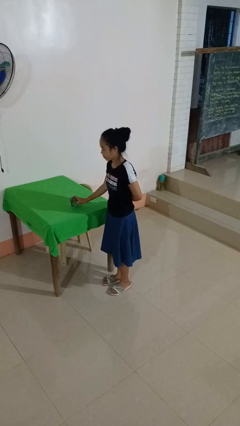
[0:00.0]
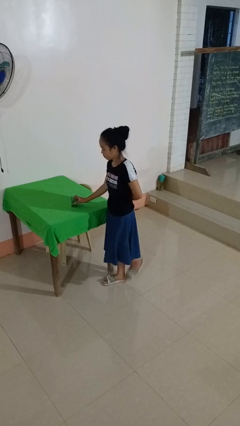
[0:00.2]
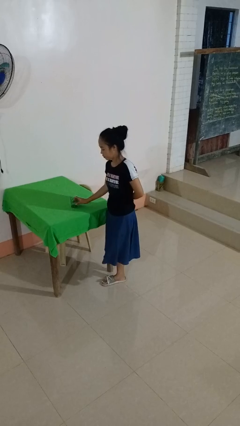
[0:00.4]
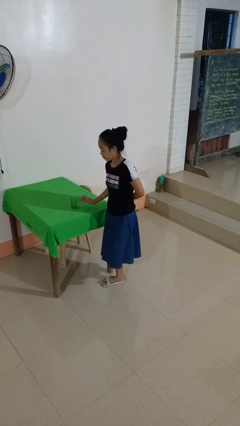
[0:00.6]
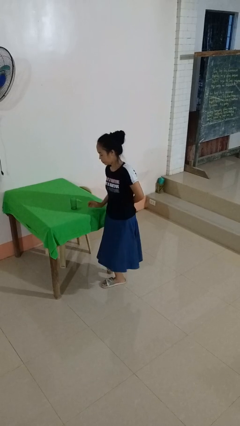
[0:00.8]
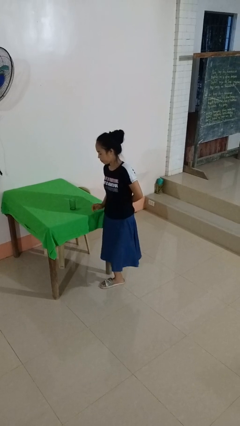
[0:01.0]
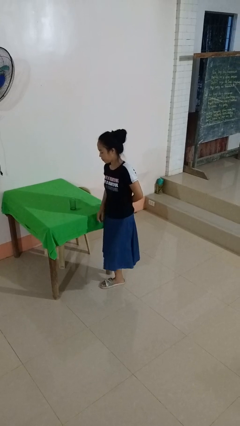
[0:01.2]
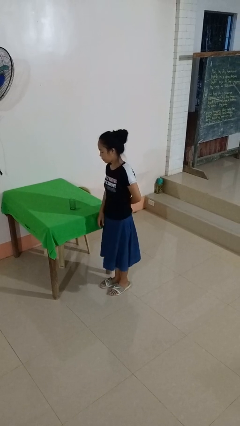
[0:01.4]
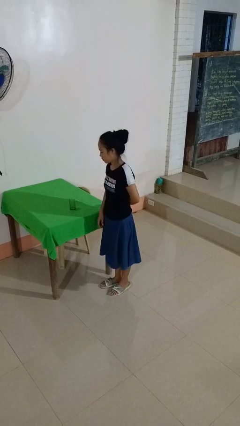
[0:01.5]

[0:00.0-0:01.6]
person sets upright glass

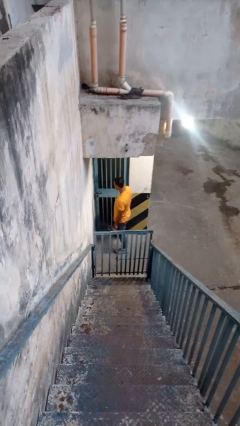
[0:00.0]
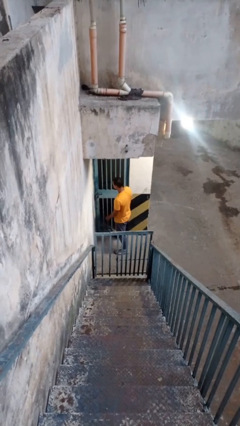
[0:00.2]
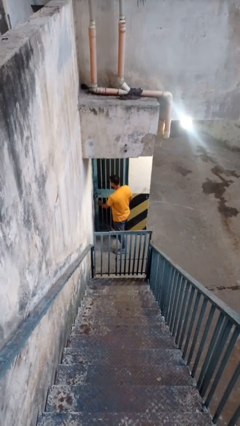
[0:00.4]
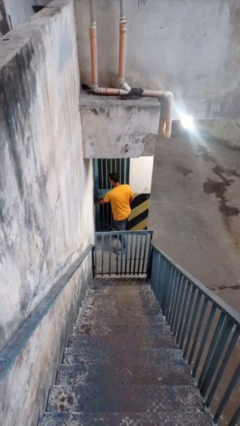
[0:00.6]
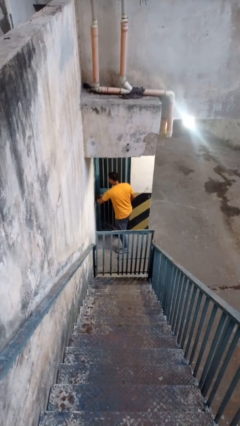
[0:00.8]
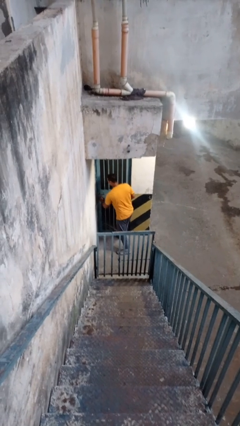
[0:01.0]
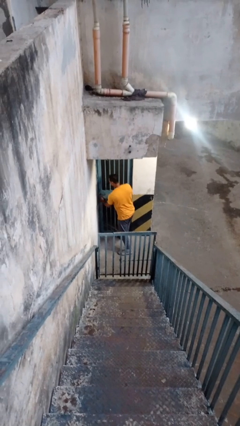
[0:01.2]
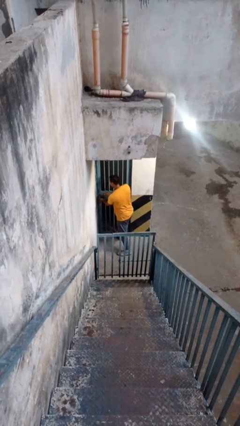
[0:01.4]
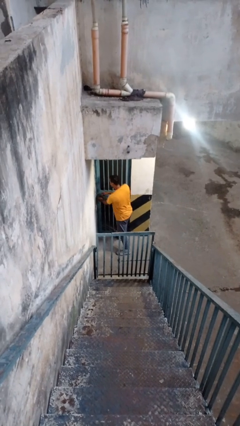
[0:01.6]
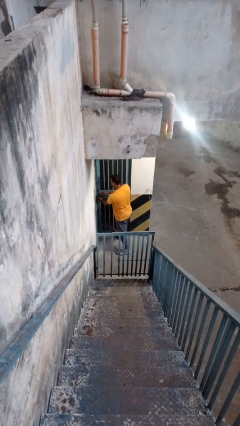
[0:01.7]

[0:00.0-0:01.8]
person unlocks door with keys

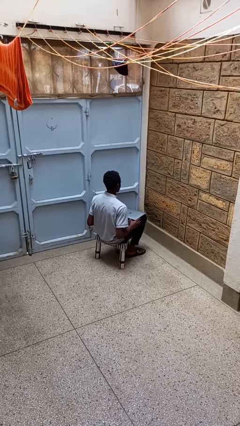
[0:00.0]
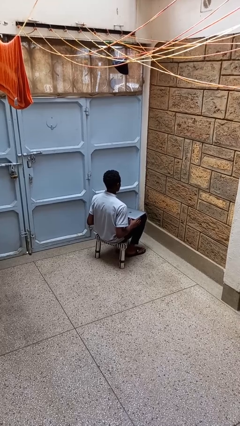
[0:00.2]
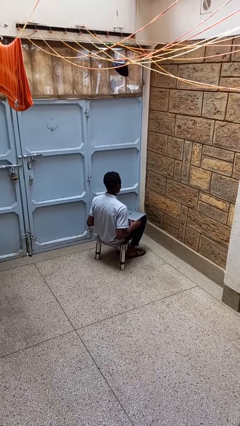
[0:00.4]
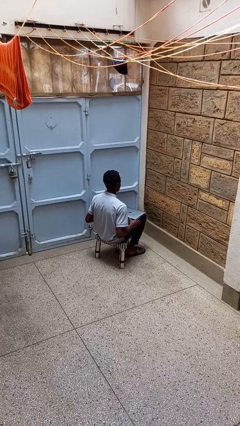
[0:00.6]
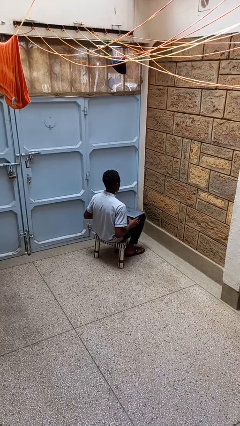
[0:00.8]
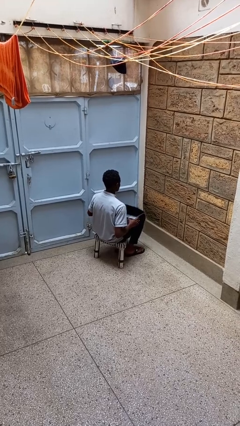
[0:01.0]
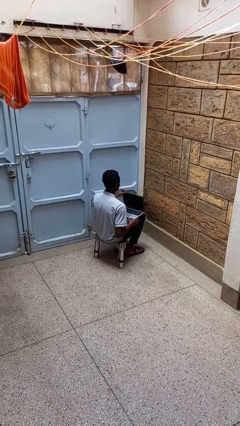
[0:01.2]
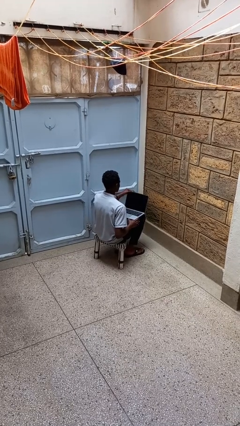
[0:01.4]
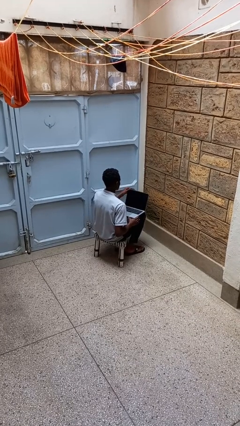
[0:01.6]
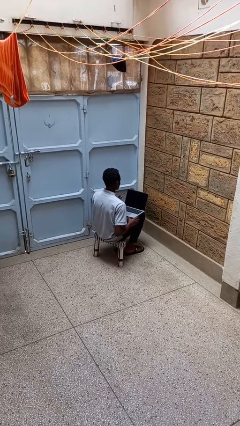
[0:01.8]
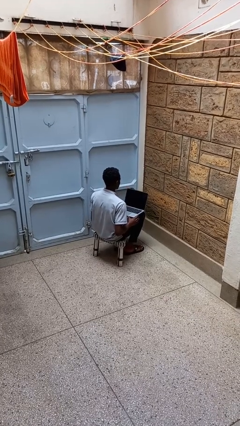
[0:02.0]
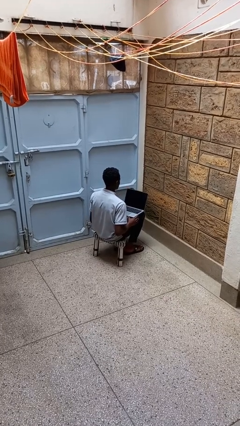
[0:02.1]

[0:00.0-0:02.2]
person opens laptop

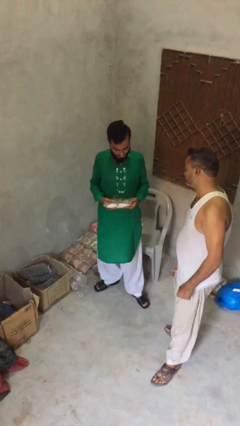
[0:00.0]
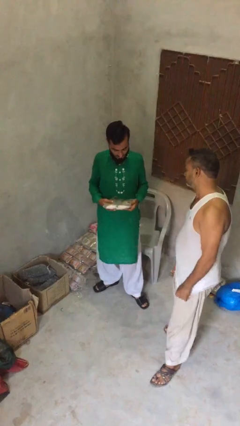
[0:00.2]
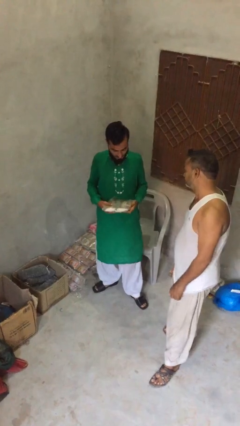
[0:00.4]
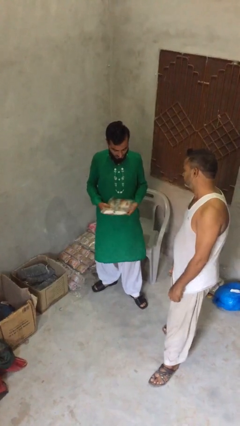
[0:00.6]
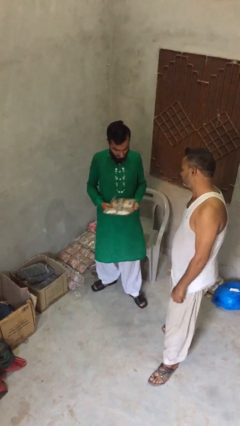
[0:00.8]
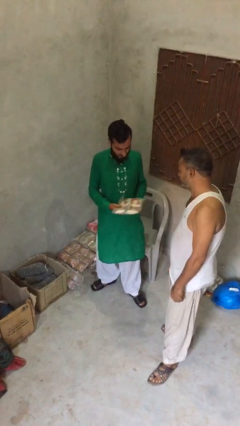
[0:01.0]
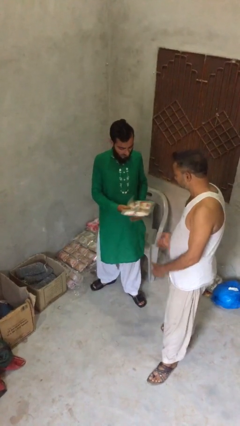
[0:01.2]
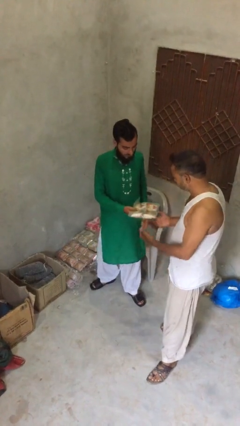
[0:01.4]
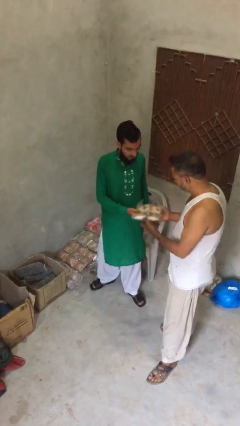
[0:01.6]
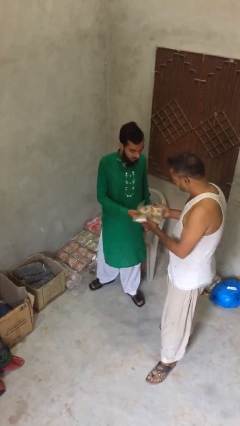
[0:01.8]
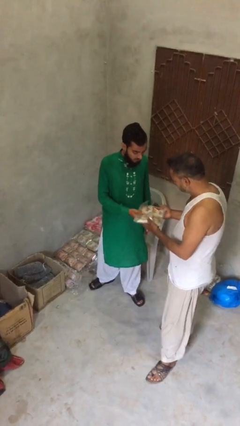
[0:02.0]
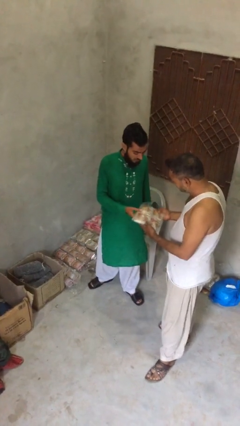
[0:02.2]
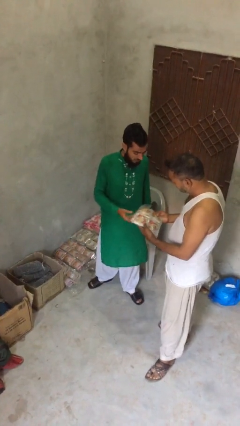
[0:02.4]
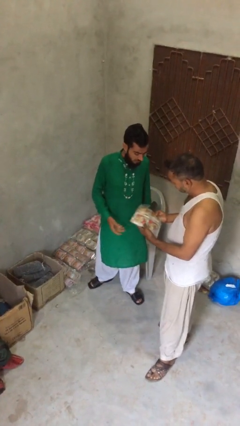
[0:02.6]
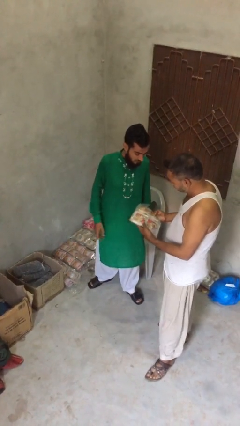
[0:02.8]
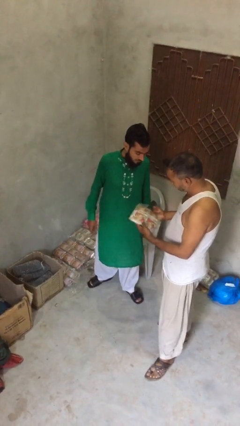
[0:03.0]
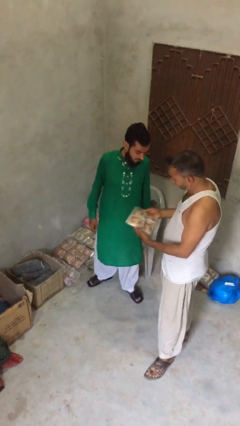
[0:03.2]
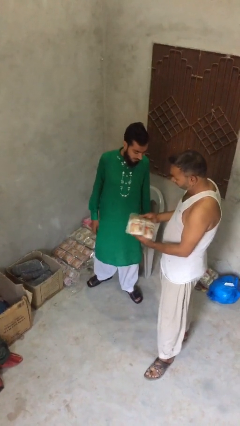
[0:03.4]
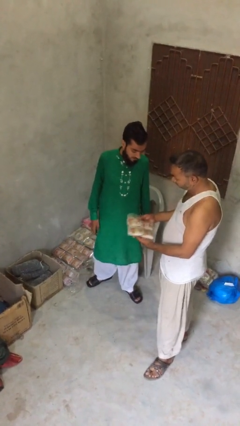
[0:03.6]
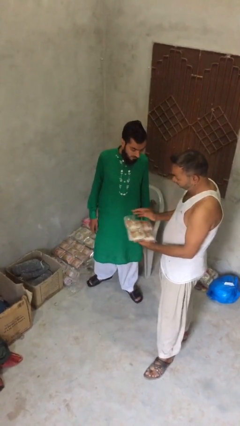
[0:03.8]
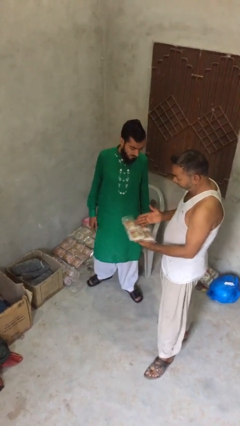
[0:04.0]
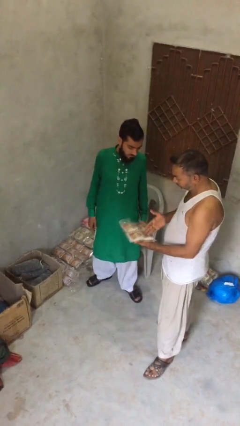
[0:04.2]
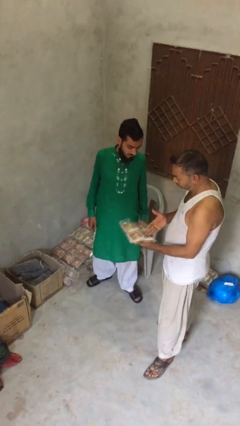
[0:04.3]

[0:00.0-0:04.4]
person transfers object to person

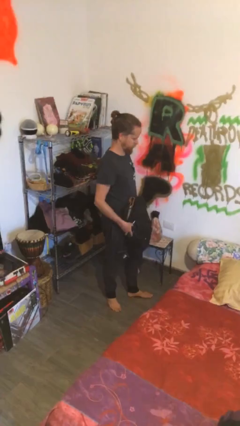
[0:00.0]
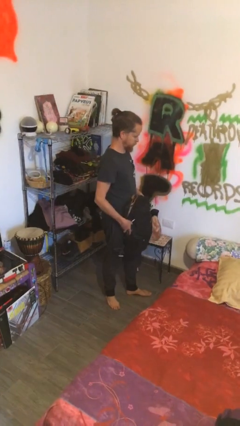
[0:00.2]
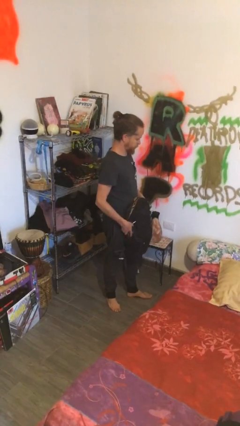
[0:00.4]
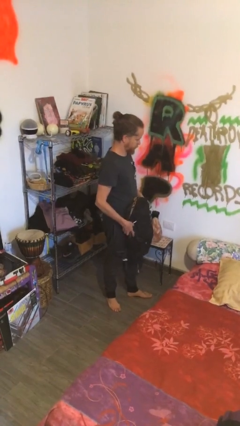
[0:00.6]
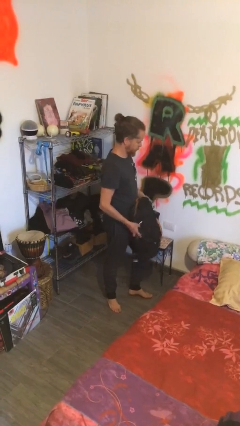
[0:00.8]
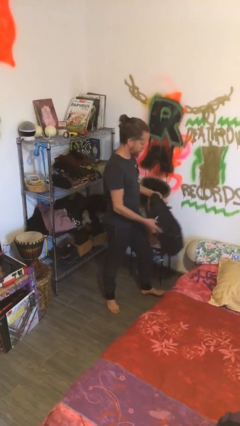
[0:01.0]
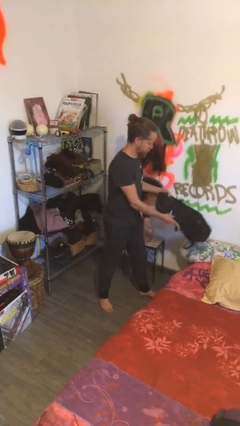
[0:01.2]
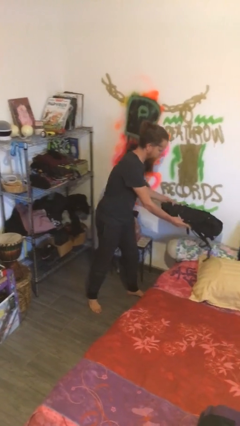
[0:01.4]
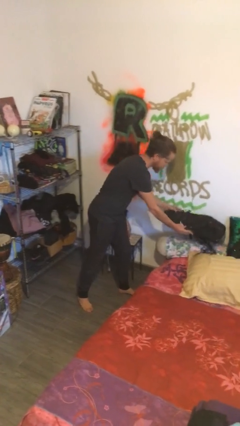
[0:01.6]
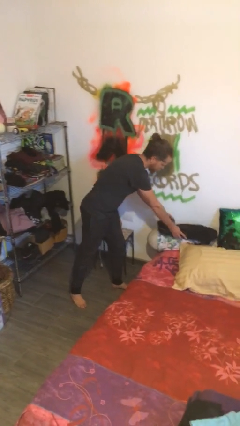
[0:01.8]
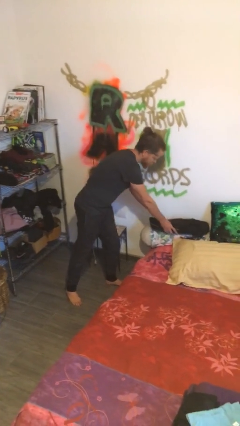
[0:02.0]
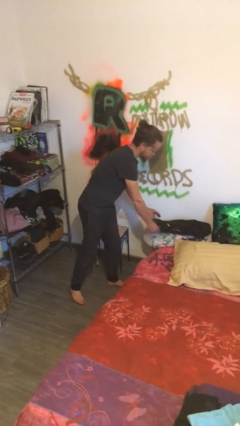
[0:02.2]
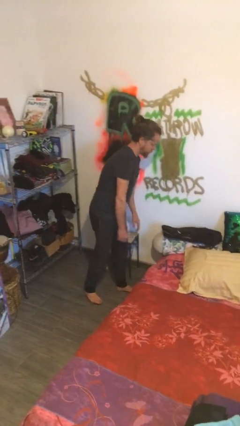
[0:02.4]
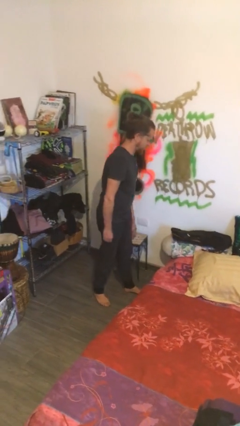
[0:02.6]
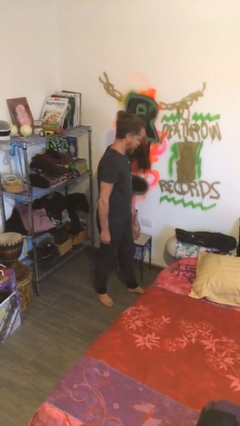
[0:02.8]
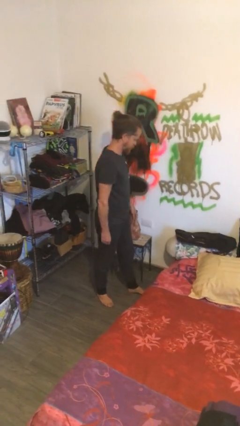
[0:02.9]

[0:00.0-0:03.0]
person puts down object on bed

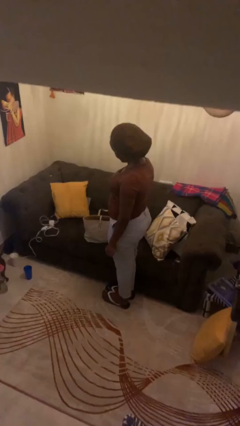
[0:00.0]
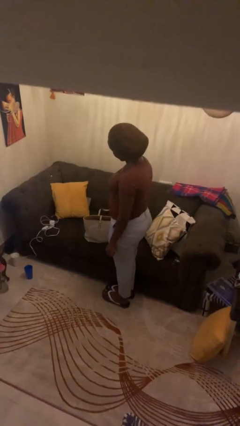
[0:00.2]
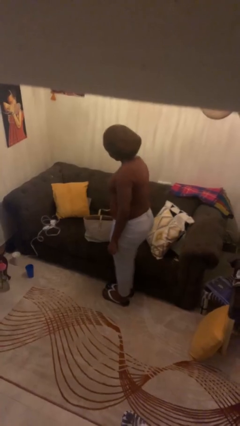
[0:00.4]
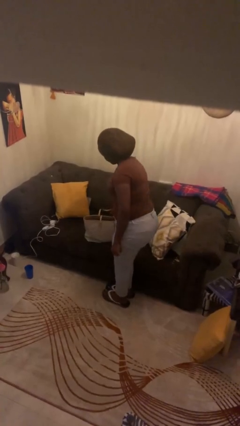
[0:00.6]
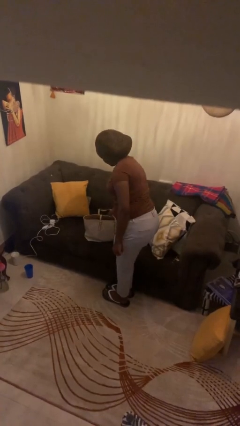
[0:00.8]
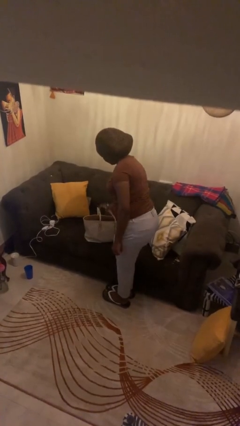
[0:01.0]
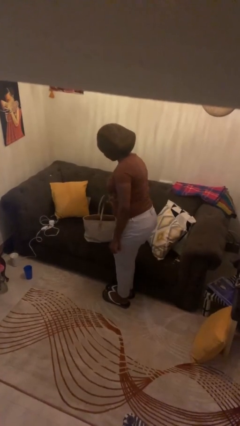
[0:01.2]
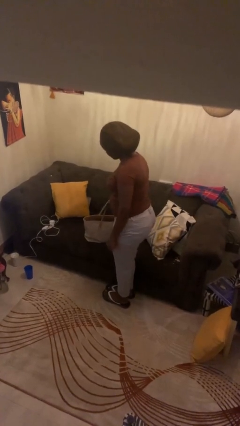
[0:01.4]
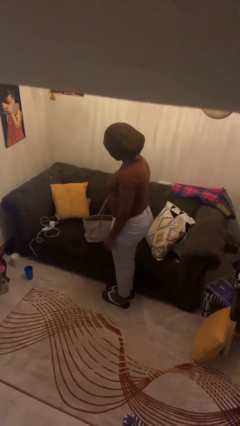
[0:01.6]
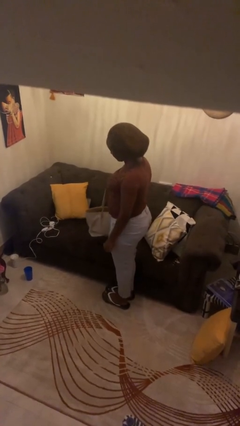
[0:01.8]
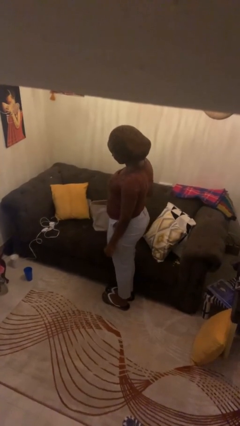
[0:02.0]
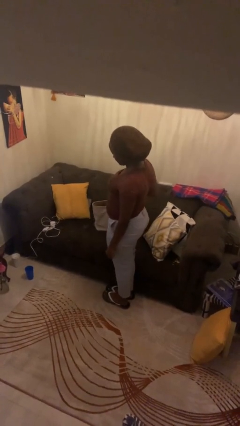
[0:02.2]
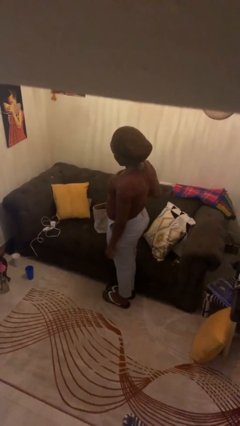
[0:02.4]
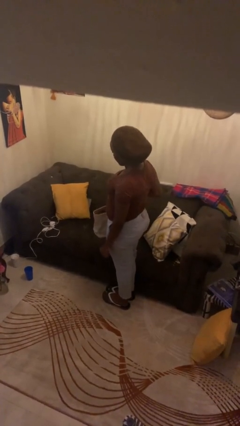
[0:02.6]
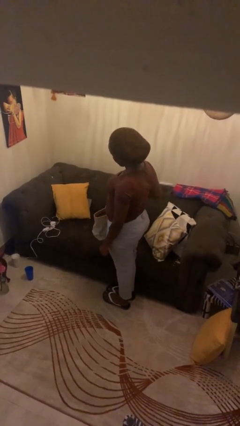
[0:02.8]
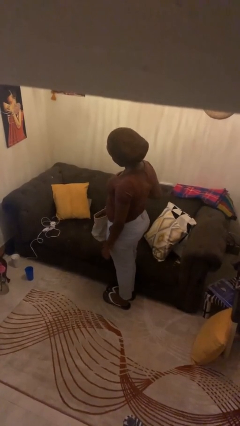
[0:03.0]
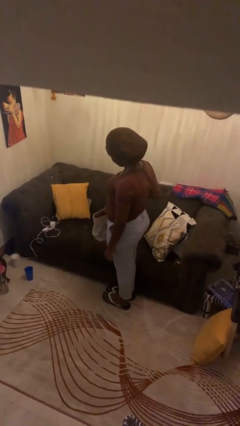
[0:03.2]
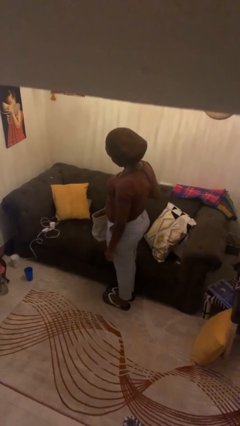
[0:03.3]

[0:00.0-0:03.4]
person picks up object from couch
